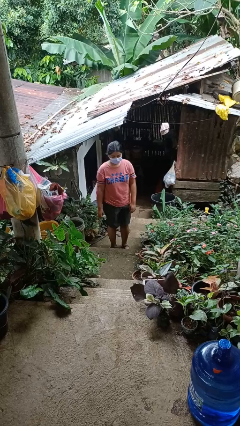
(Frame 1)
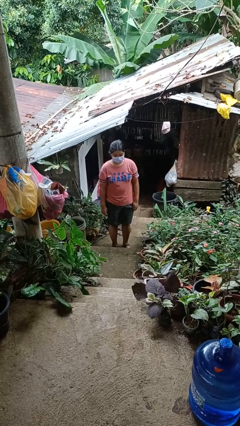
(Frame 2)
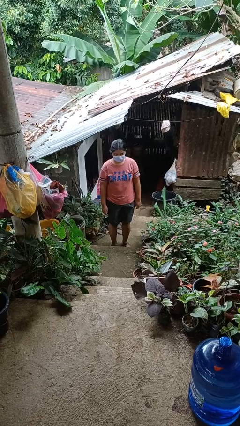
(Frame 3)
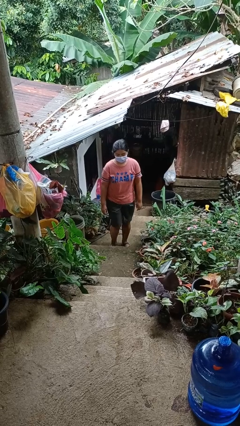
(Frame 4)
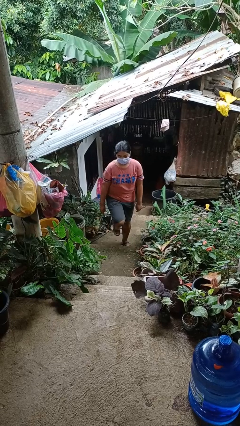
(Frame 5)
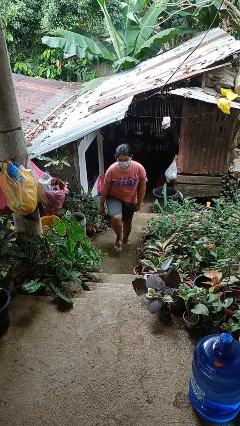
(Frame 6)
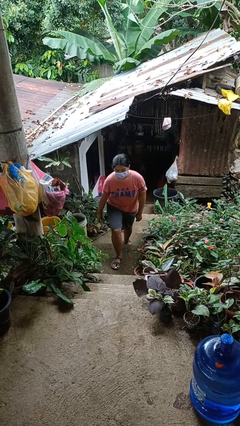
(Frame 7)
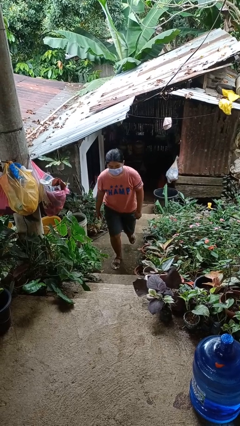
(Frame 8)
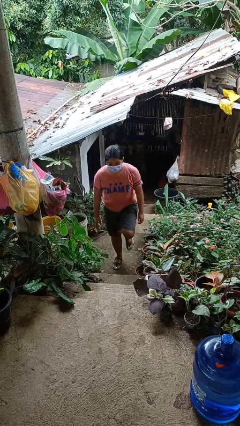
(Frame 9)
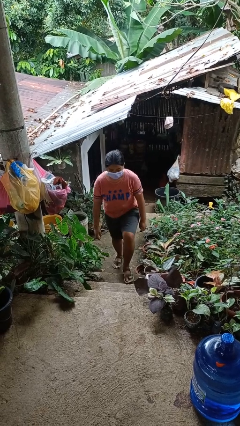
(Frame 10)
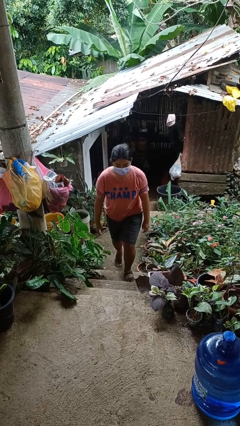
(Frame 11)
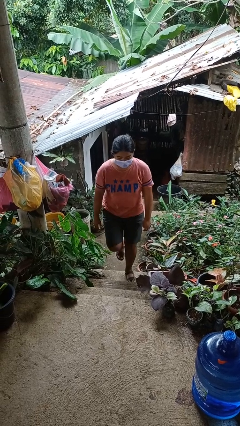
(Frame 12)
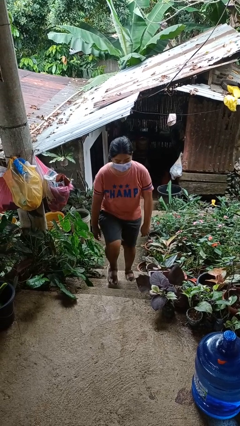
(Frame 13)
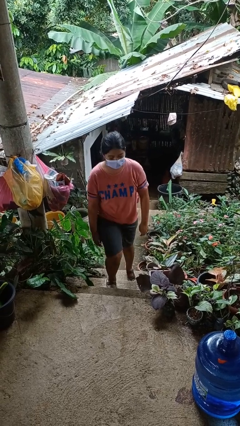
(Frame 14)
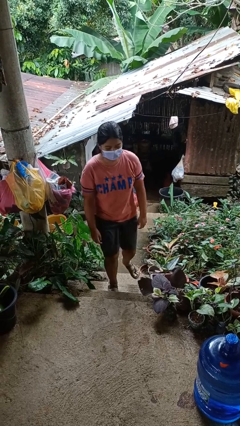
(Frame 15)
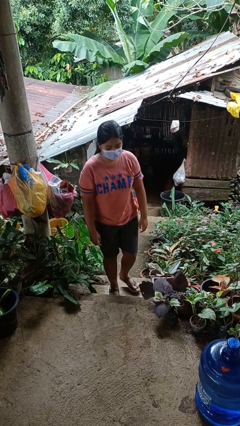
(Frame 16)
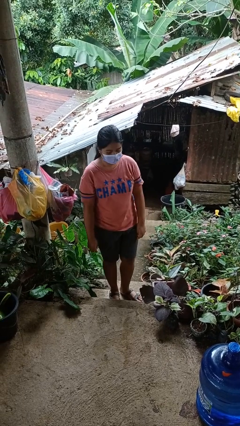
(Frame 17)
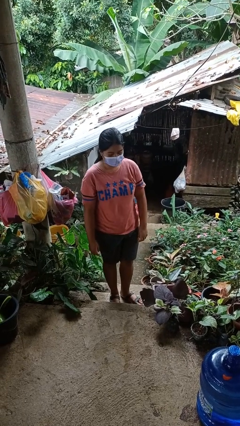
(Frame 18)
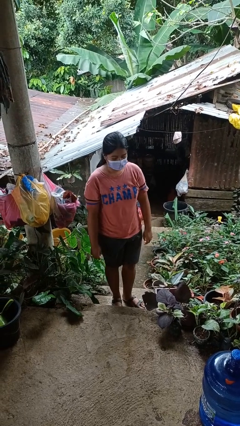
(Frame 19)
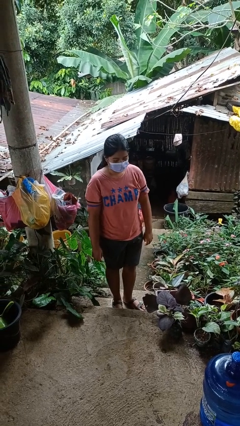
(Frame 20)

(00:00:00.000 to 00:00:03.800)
person climbs up stairs

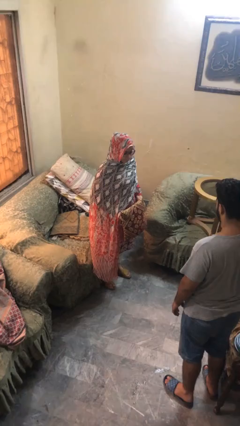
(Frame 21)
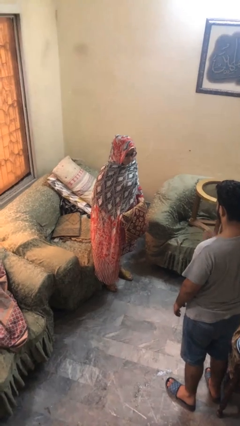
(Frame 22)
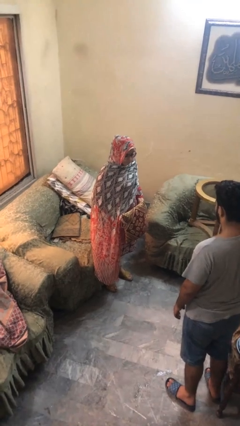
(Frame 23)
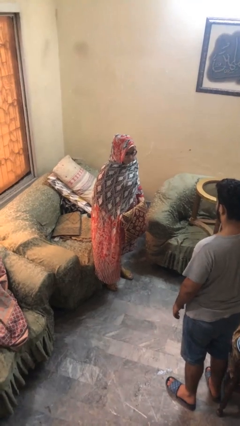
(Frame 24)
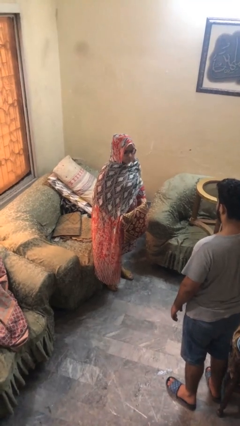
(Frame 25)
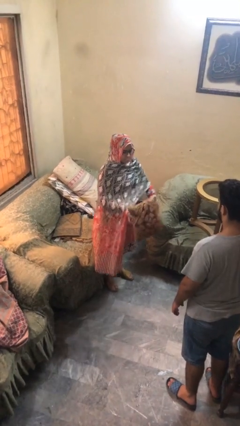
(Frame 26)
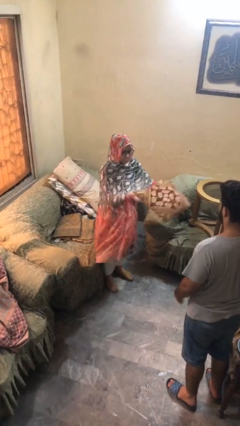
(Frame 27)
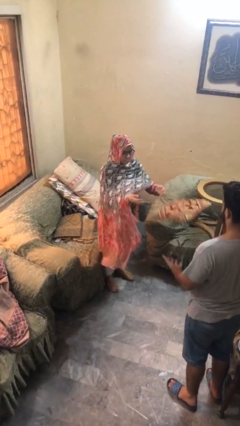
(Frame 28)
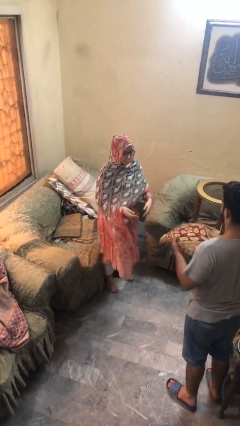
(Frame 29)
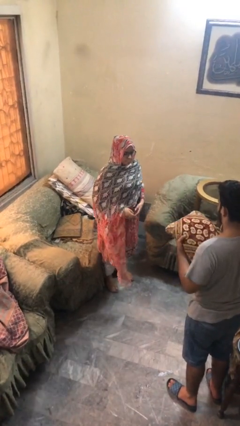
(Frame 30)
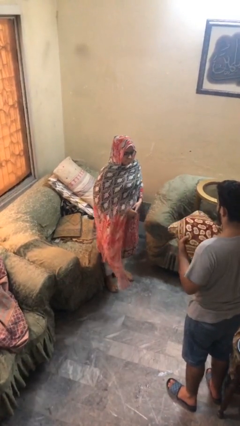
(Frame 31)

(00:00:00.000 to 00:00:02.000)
person throws object to person

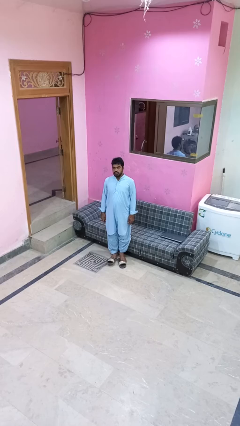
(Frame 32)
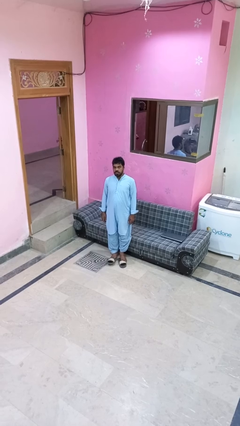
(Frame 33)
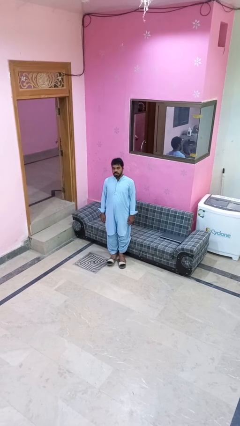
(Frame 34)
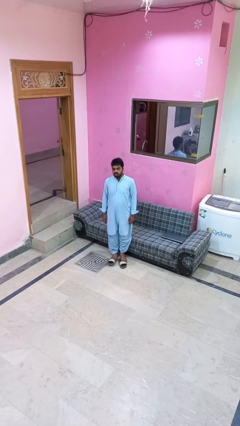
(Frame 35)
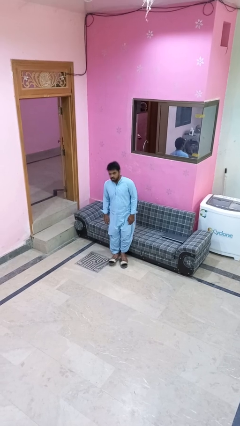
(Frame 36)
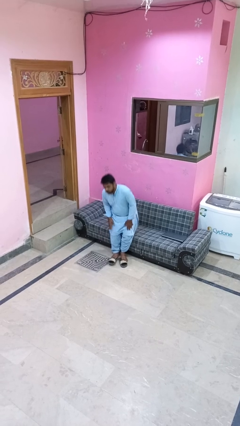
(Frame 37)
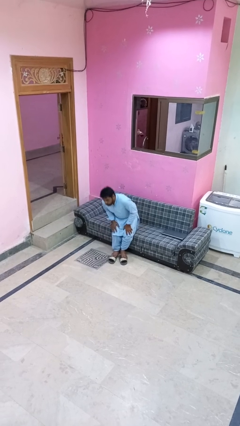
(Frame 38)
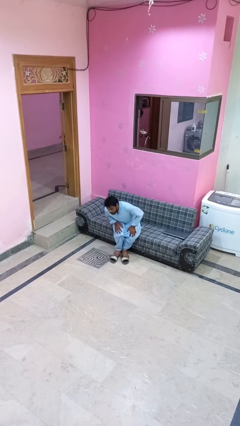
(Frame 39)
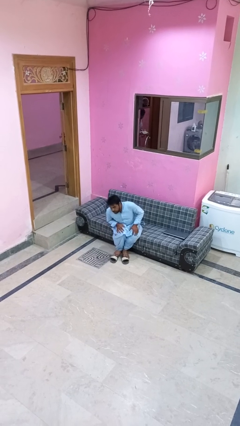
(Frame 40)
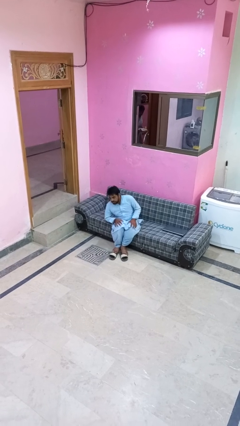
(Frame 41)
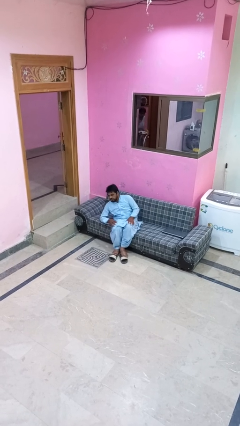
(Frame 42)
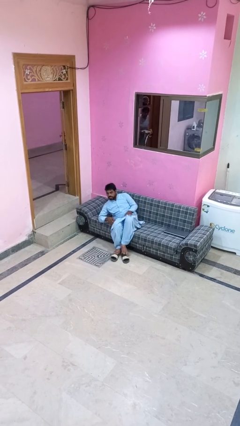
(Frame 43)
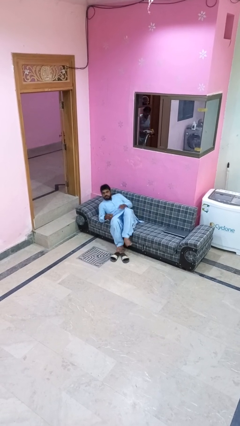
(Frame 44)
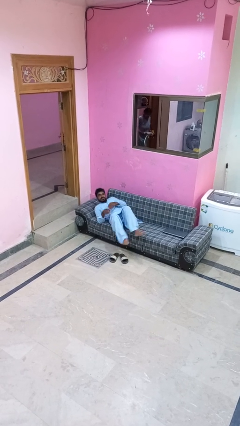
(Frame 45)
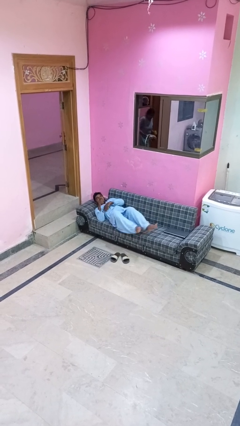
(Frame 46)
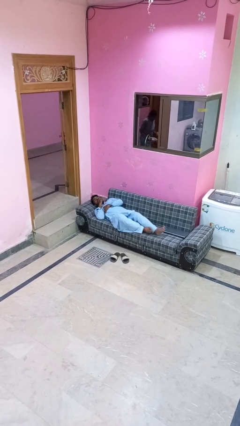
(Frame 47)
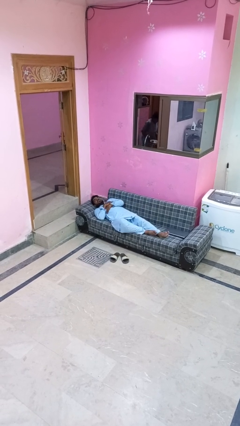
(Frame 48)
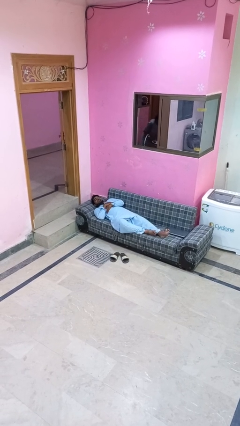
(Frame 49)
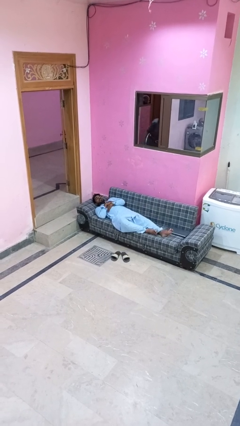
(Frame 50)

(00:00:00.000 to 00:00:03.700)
person lies down on couch

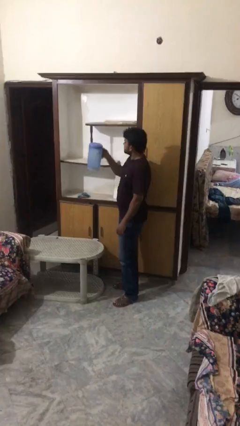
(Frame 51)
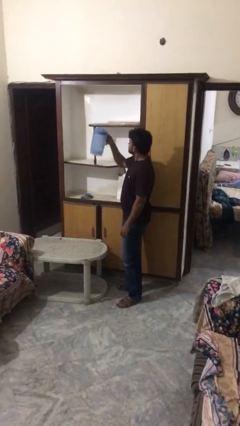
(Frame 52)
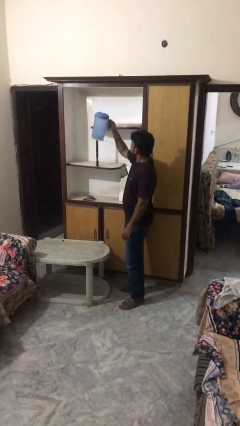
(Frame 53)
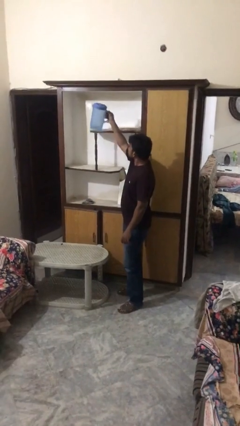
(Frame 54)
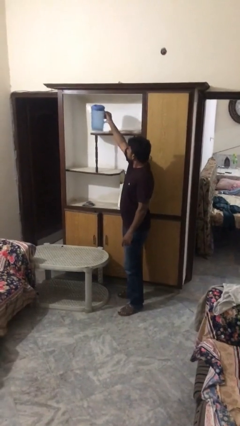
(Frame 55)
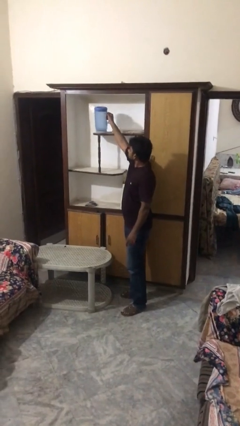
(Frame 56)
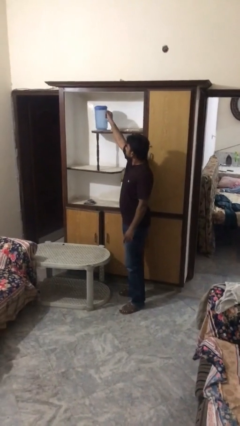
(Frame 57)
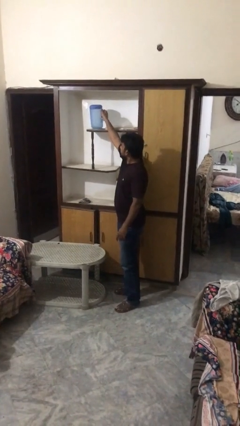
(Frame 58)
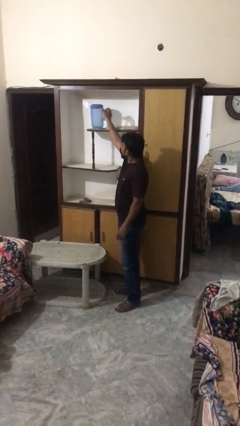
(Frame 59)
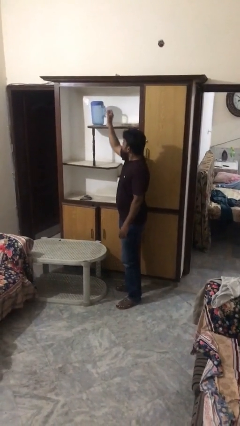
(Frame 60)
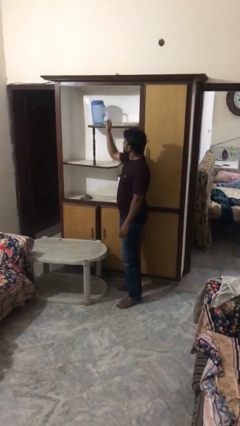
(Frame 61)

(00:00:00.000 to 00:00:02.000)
person puts down object on shelf

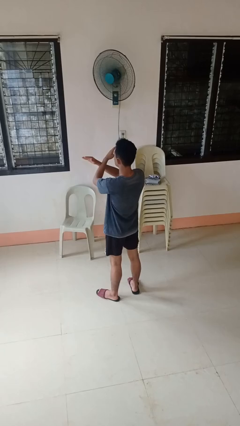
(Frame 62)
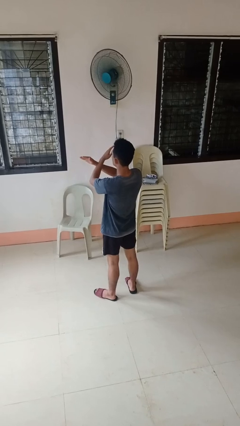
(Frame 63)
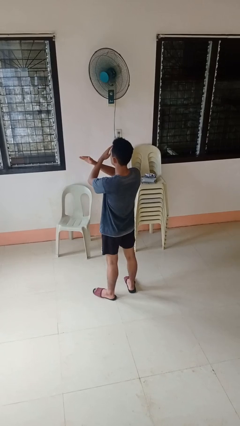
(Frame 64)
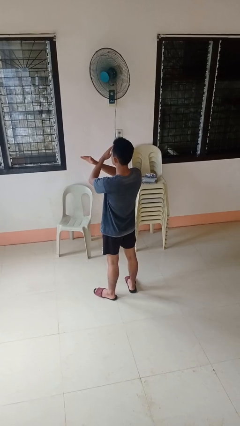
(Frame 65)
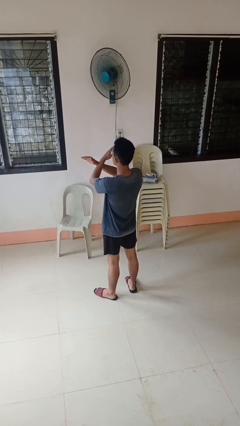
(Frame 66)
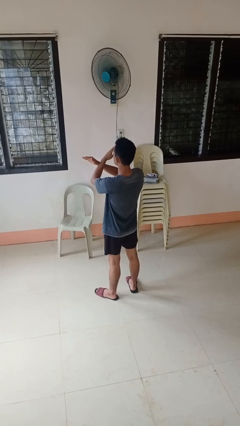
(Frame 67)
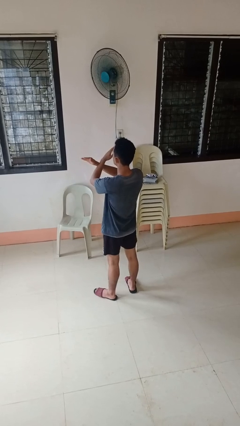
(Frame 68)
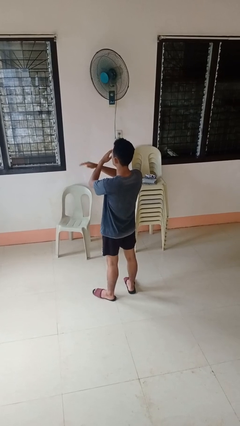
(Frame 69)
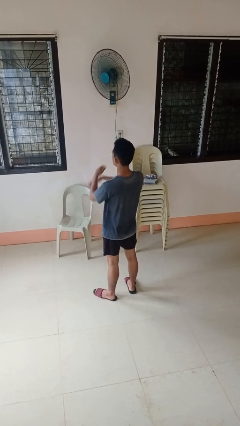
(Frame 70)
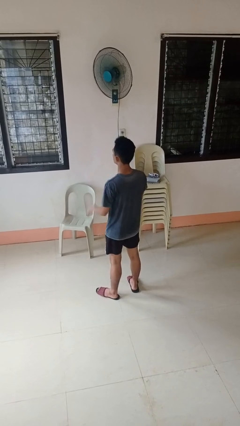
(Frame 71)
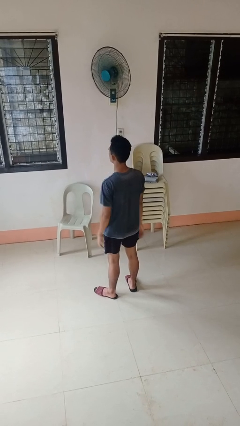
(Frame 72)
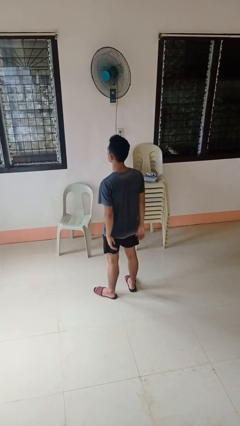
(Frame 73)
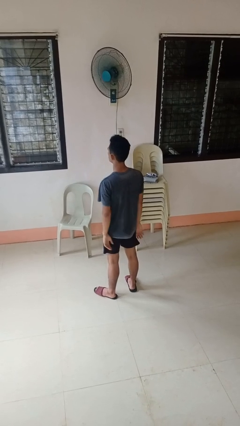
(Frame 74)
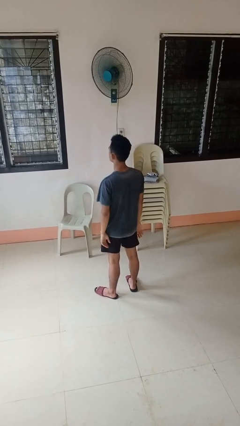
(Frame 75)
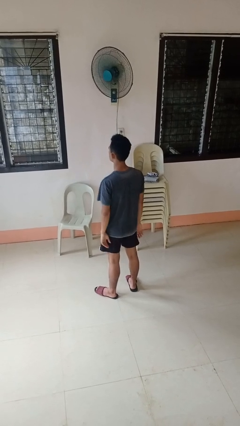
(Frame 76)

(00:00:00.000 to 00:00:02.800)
person gestures arms x

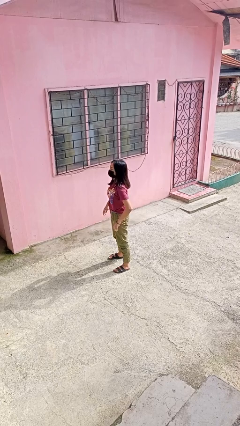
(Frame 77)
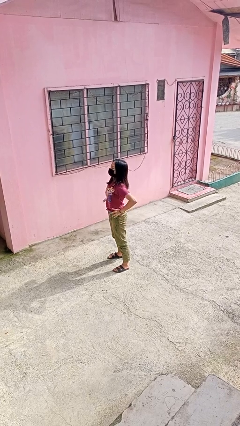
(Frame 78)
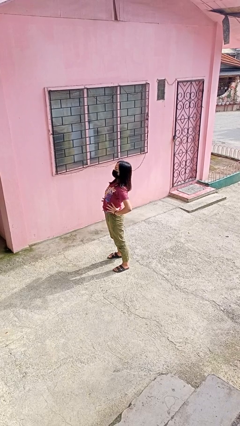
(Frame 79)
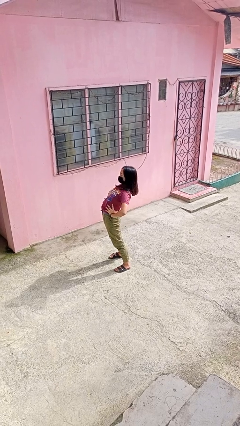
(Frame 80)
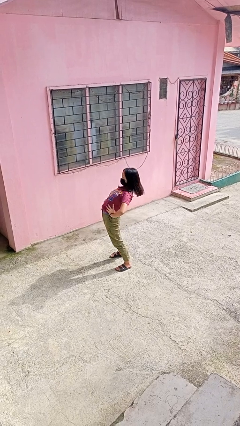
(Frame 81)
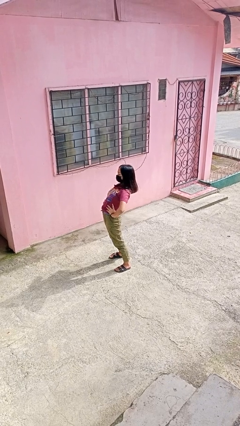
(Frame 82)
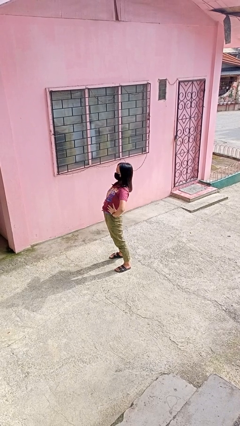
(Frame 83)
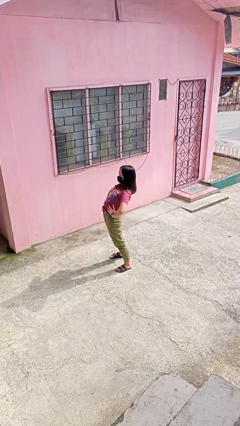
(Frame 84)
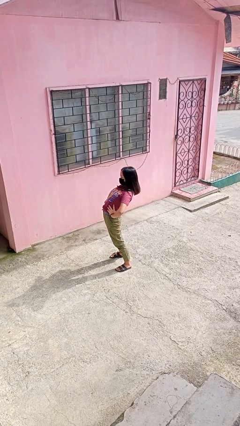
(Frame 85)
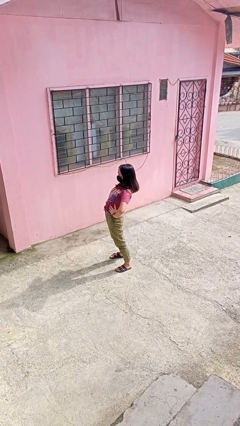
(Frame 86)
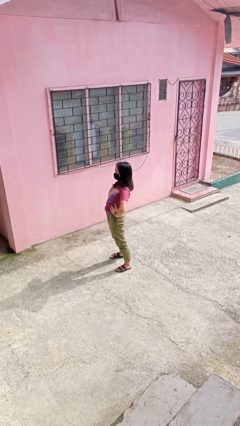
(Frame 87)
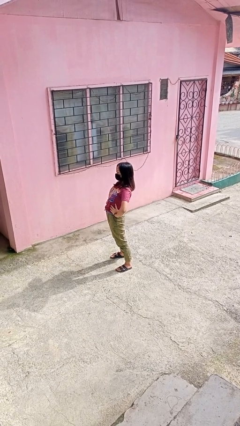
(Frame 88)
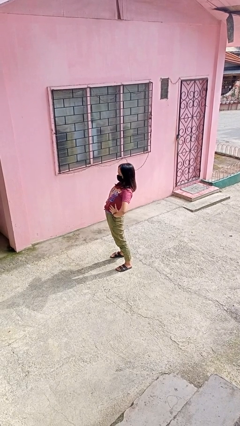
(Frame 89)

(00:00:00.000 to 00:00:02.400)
person stretches back

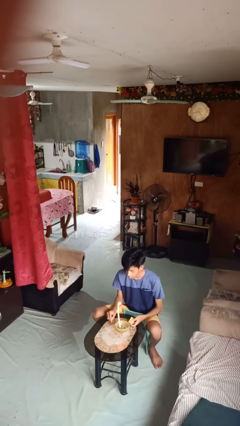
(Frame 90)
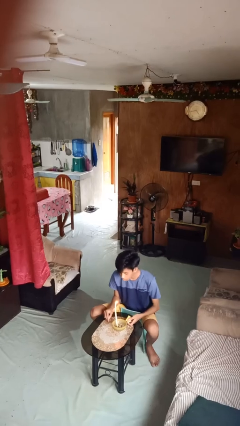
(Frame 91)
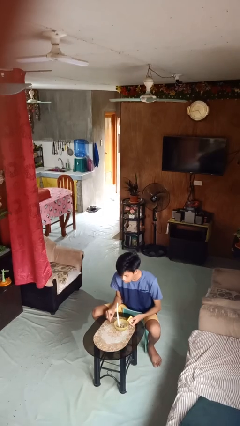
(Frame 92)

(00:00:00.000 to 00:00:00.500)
person extinguishes candle
